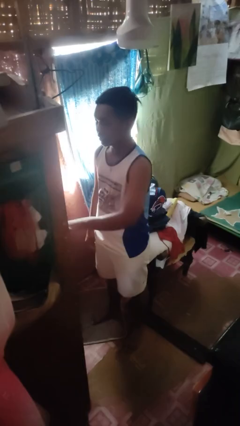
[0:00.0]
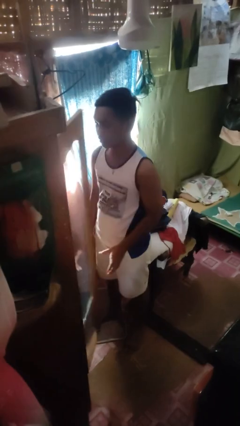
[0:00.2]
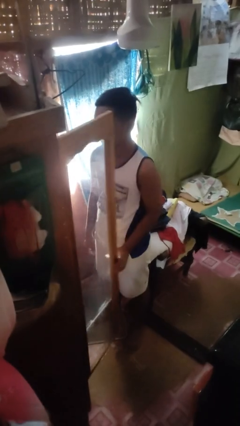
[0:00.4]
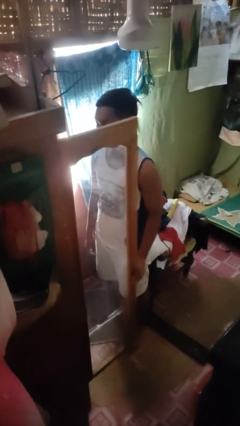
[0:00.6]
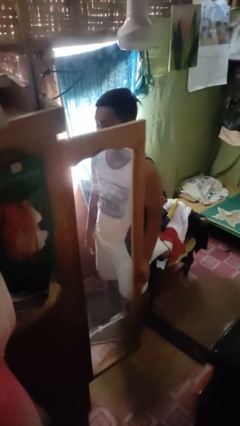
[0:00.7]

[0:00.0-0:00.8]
person opens closet door

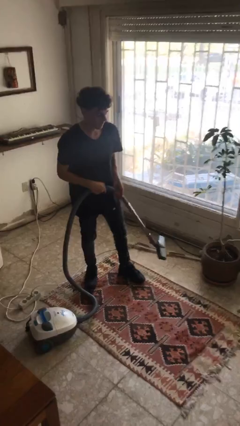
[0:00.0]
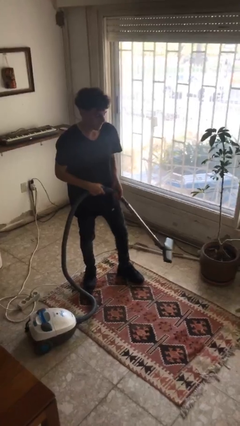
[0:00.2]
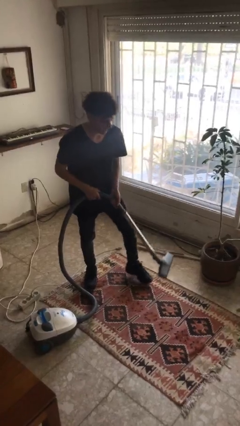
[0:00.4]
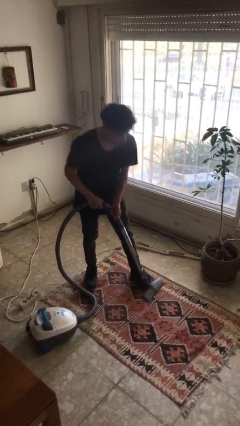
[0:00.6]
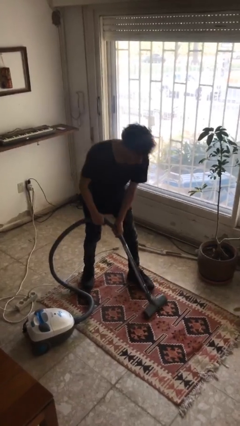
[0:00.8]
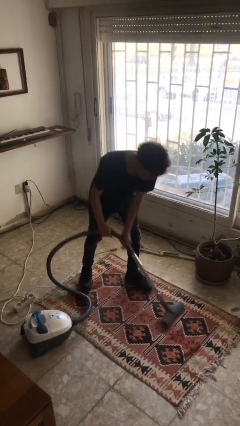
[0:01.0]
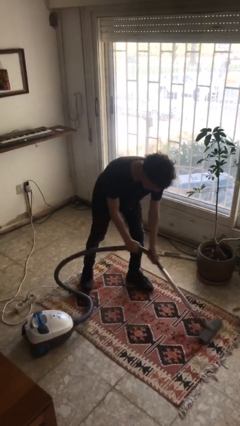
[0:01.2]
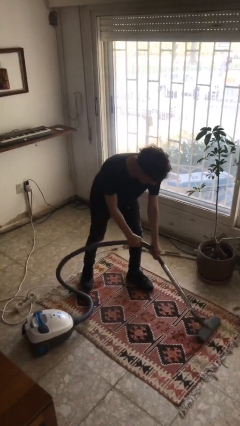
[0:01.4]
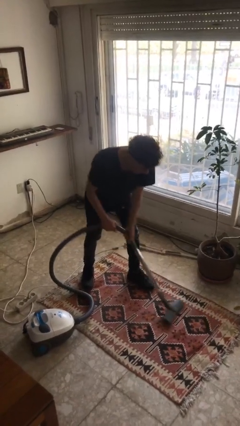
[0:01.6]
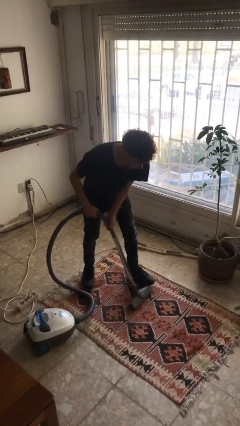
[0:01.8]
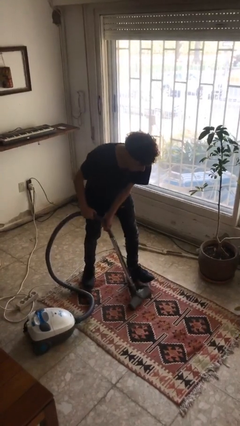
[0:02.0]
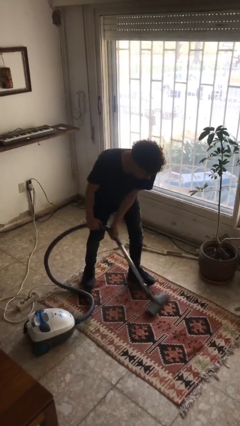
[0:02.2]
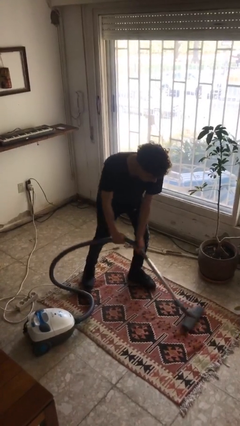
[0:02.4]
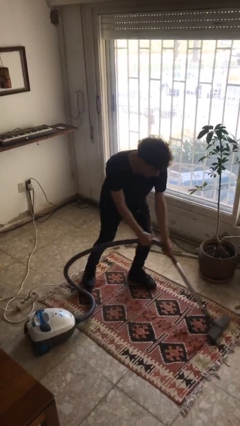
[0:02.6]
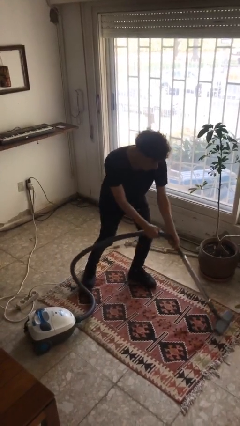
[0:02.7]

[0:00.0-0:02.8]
person vacuums carpet

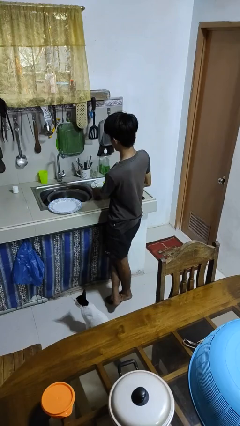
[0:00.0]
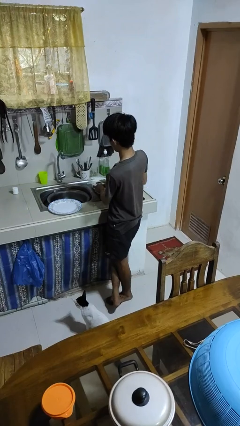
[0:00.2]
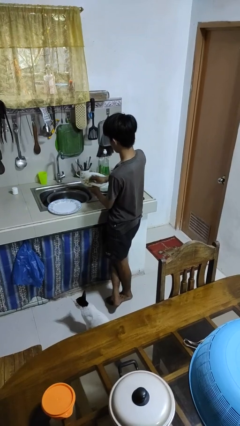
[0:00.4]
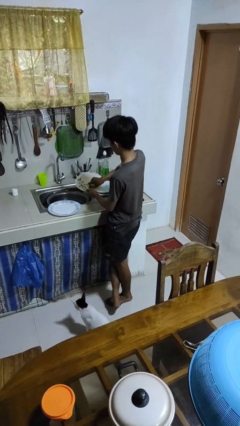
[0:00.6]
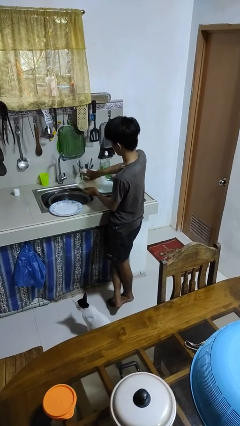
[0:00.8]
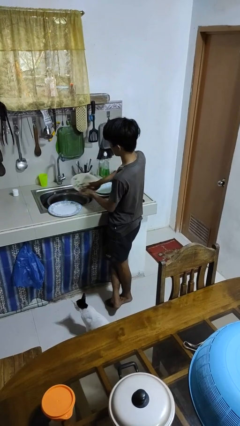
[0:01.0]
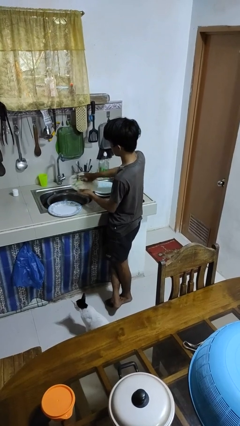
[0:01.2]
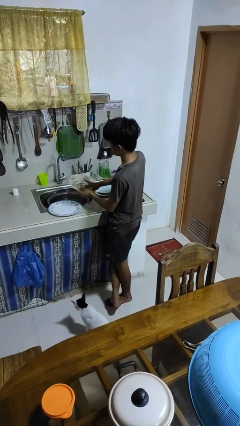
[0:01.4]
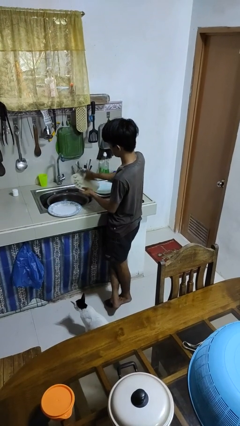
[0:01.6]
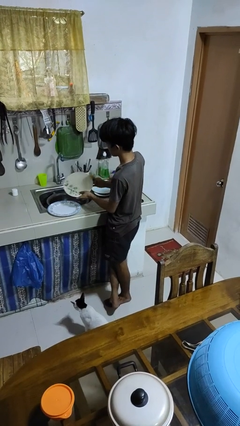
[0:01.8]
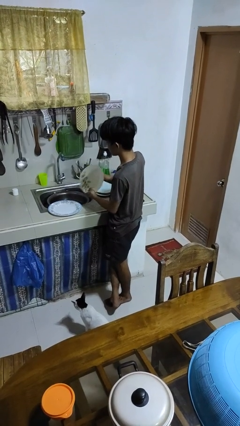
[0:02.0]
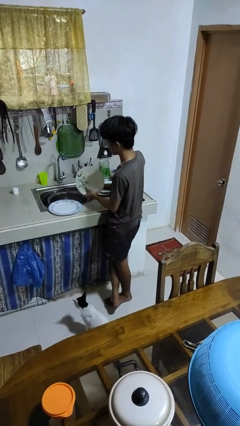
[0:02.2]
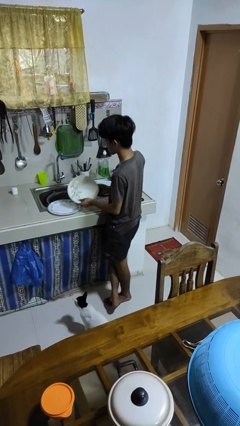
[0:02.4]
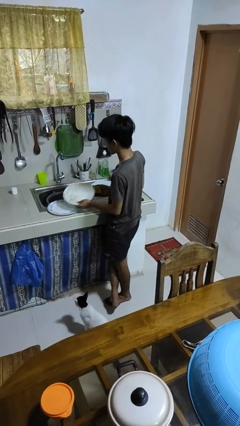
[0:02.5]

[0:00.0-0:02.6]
person dries hands with towel

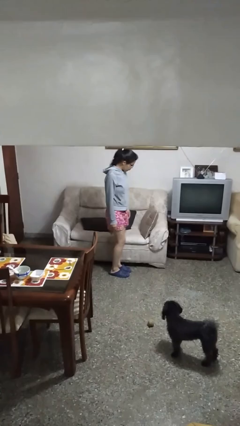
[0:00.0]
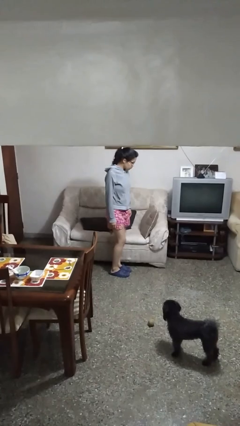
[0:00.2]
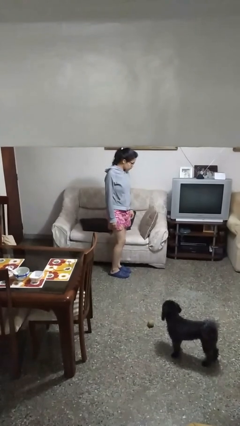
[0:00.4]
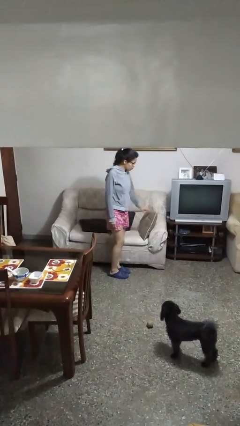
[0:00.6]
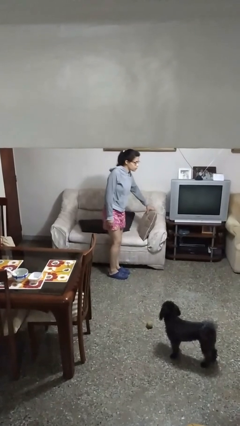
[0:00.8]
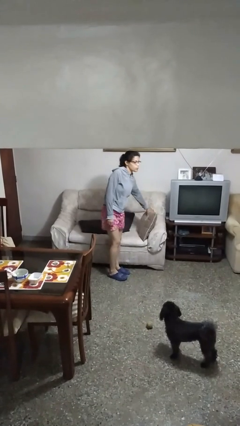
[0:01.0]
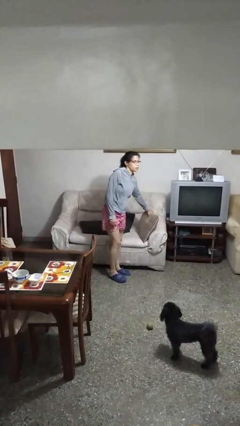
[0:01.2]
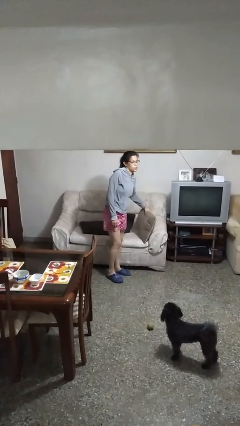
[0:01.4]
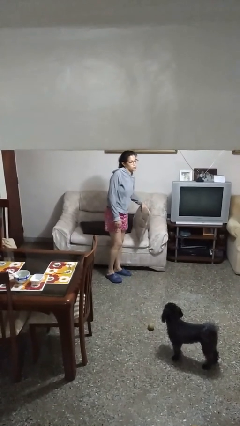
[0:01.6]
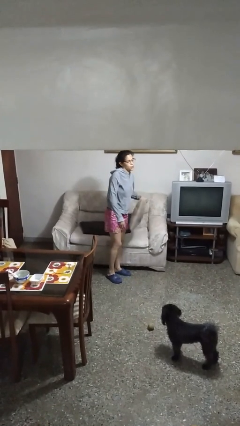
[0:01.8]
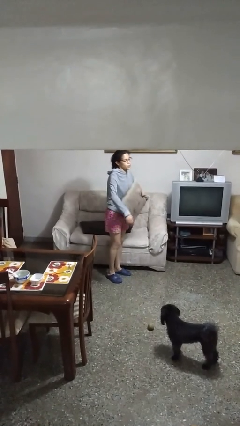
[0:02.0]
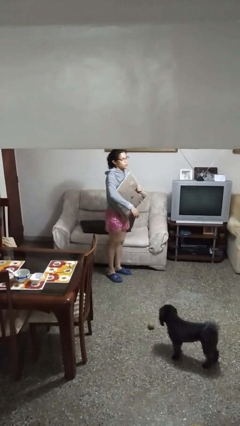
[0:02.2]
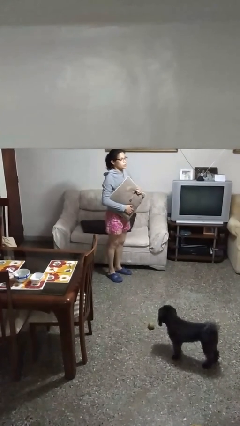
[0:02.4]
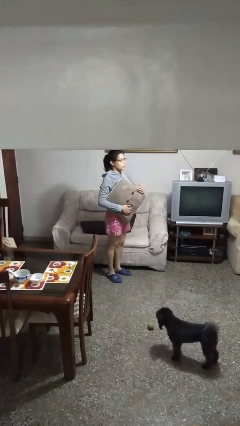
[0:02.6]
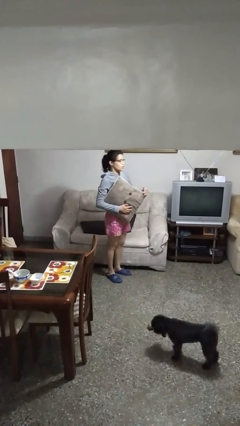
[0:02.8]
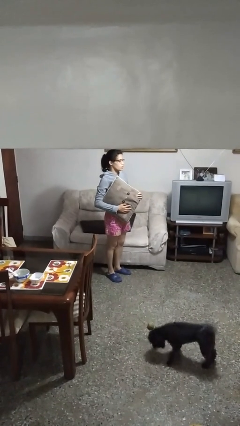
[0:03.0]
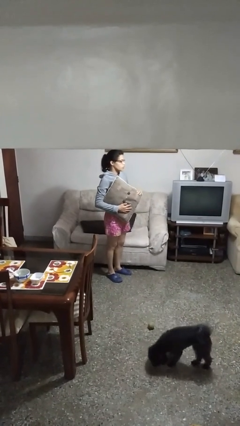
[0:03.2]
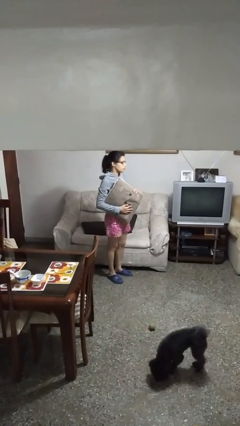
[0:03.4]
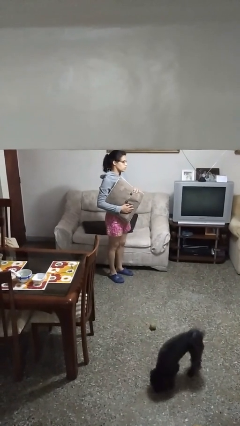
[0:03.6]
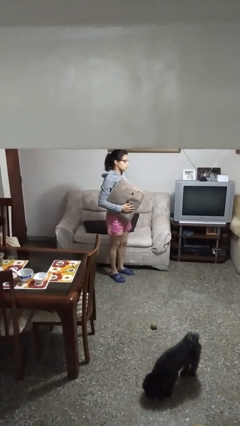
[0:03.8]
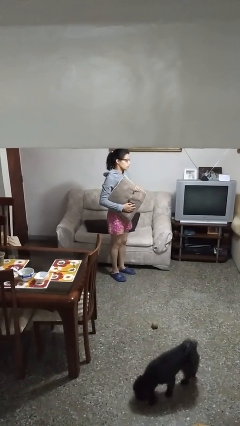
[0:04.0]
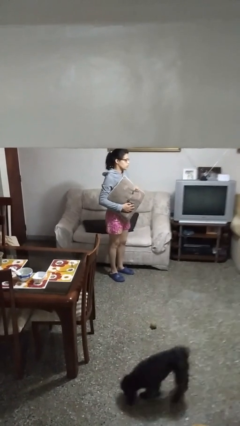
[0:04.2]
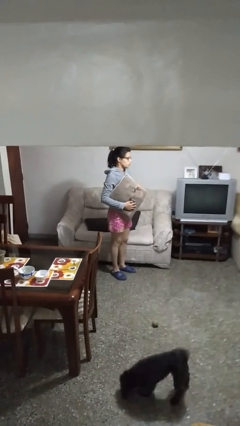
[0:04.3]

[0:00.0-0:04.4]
person picks up object from couch

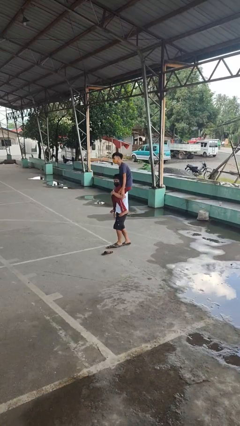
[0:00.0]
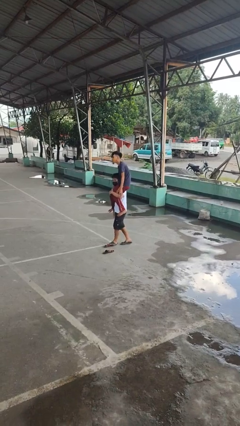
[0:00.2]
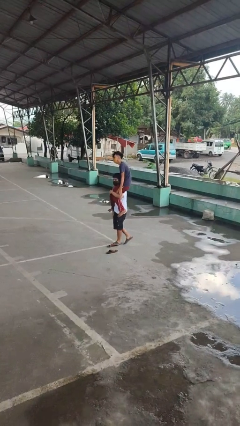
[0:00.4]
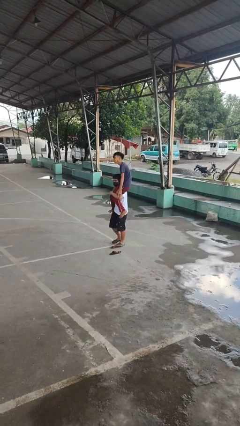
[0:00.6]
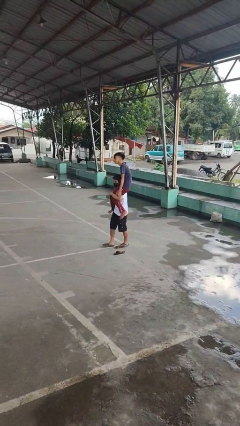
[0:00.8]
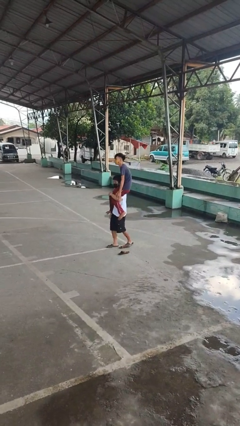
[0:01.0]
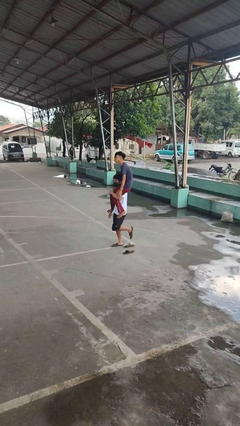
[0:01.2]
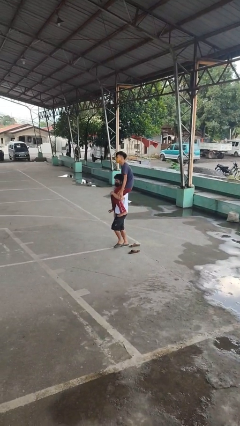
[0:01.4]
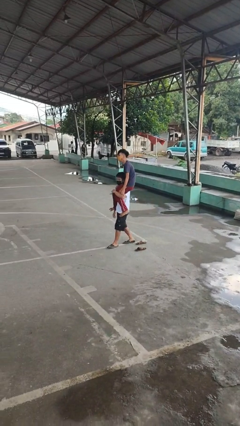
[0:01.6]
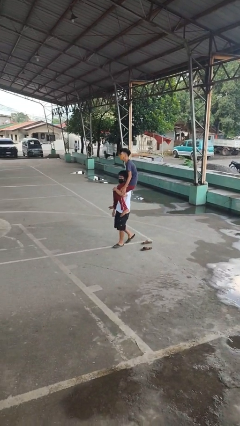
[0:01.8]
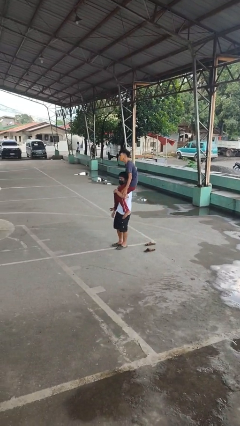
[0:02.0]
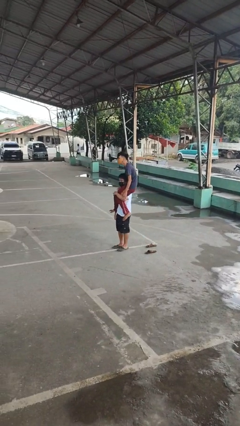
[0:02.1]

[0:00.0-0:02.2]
person carries person on shoulders

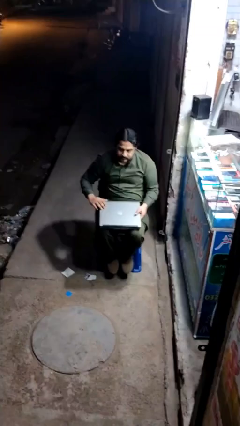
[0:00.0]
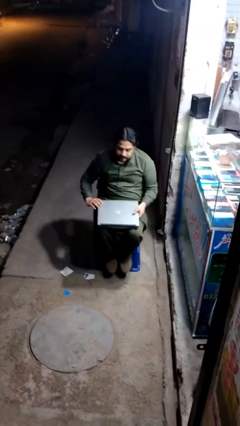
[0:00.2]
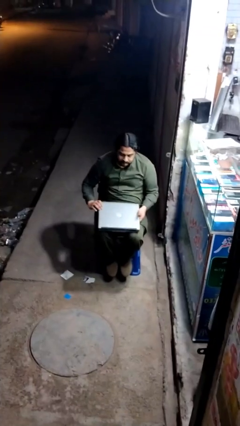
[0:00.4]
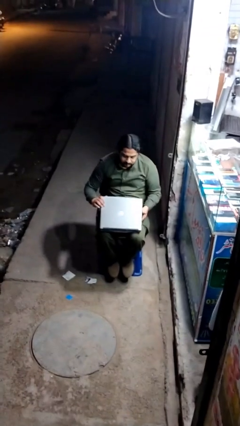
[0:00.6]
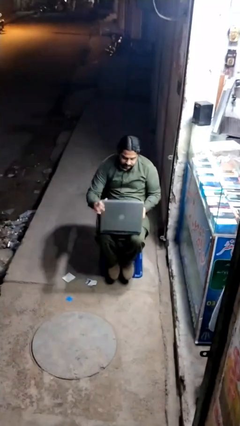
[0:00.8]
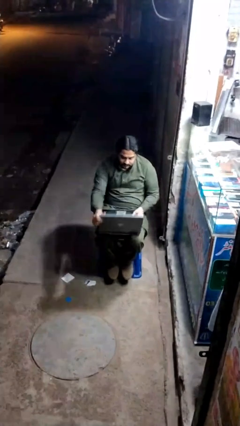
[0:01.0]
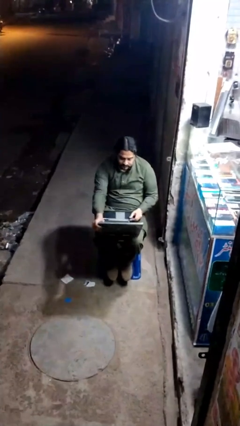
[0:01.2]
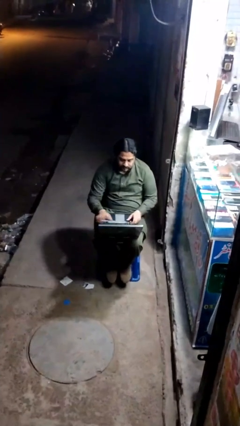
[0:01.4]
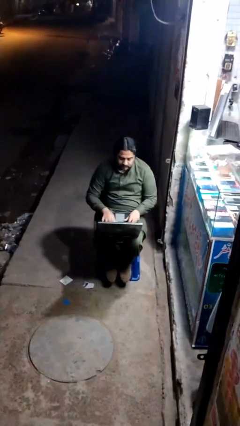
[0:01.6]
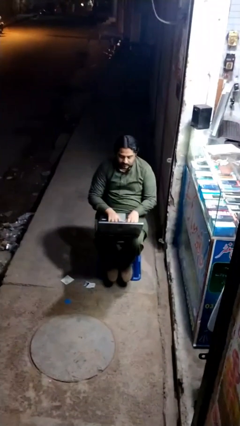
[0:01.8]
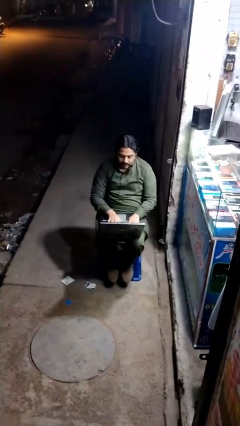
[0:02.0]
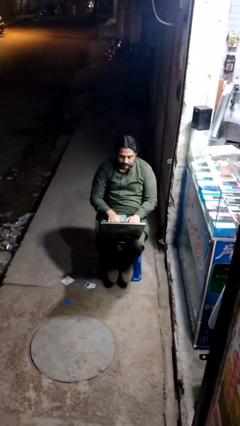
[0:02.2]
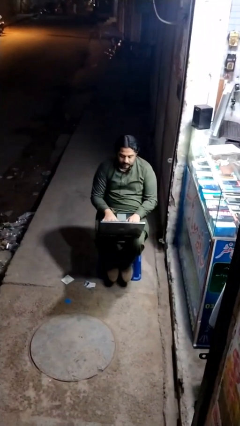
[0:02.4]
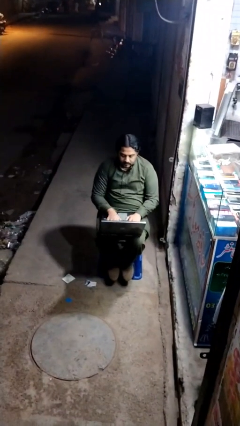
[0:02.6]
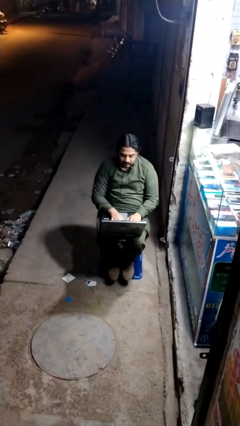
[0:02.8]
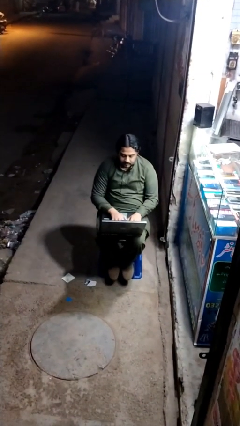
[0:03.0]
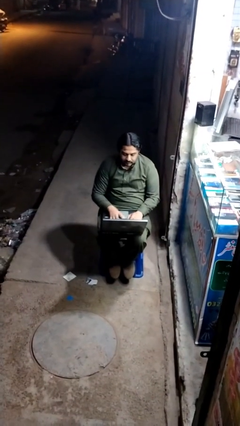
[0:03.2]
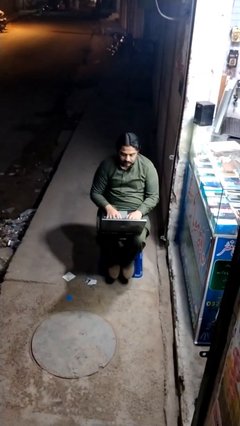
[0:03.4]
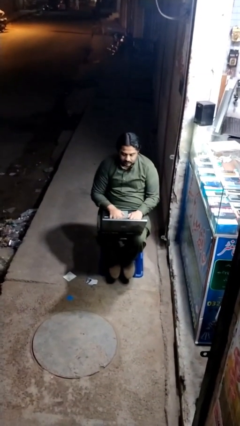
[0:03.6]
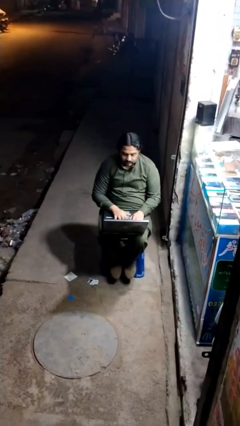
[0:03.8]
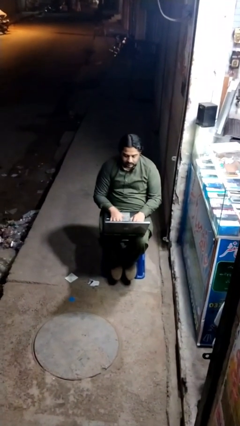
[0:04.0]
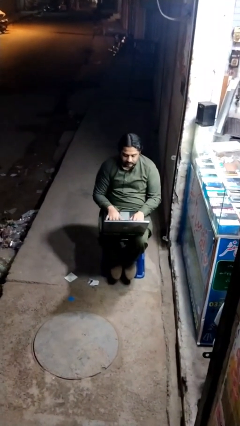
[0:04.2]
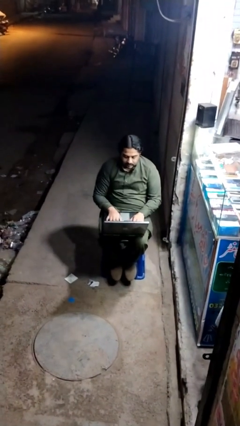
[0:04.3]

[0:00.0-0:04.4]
person interacts with laptop

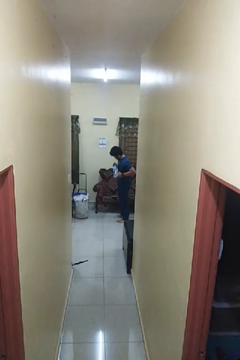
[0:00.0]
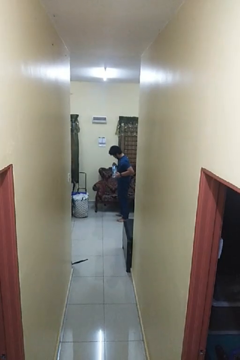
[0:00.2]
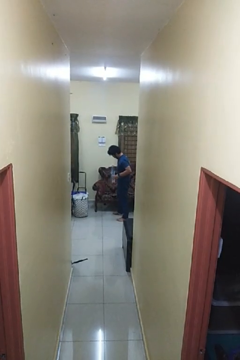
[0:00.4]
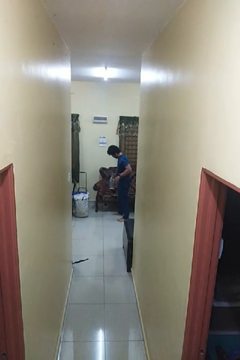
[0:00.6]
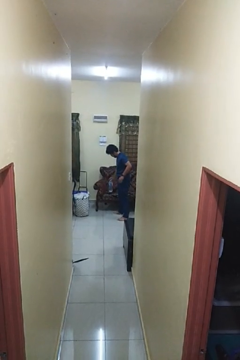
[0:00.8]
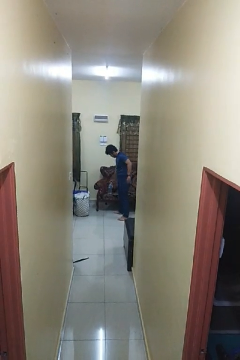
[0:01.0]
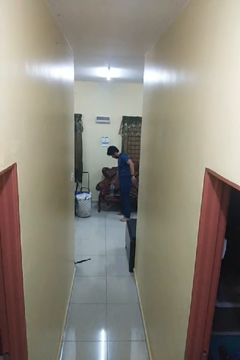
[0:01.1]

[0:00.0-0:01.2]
person puts down object on couch
